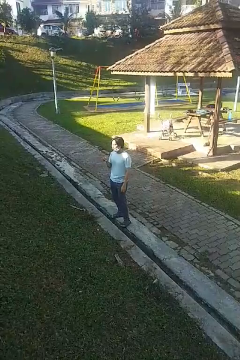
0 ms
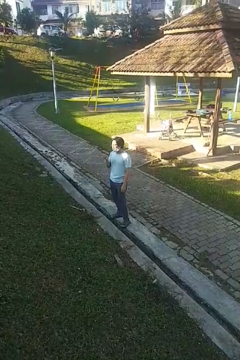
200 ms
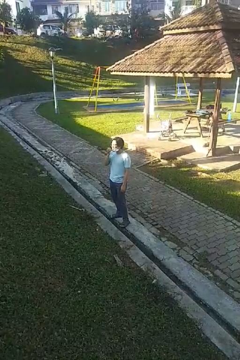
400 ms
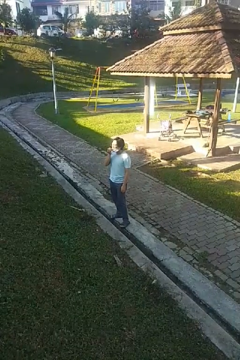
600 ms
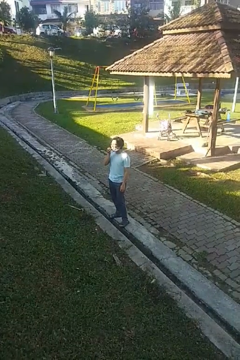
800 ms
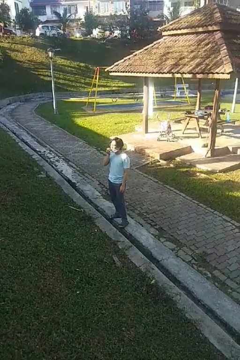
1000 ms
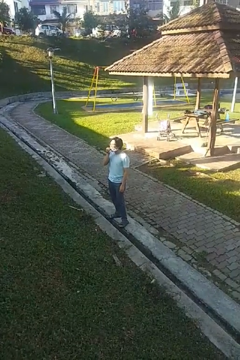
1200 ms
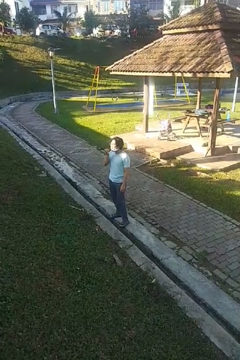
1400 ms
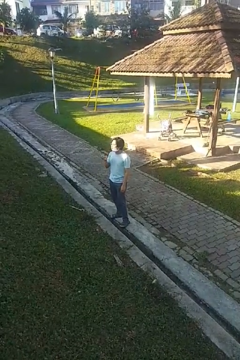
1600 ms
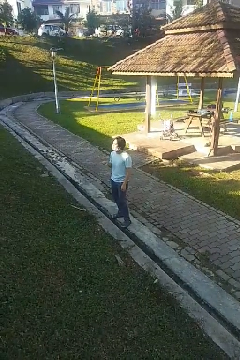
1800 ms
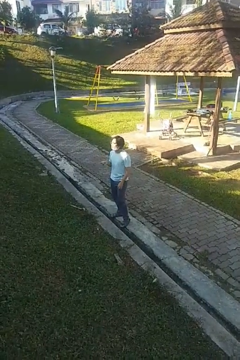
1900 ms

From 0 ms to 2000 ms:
person flosses

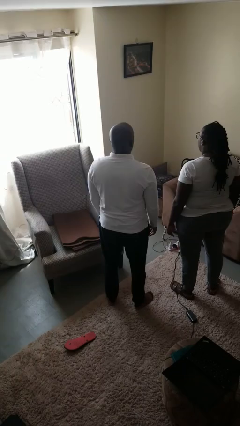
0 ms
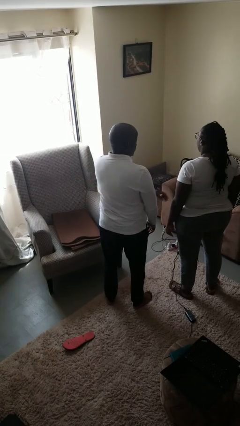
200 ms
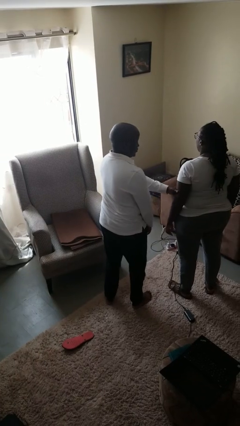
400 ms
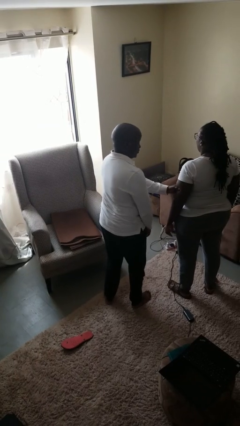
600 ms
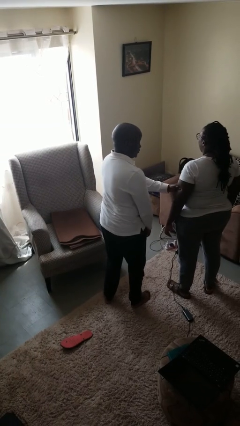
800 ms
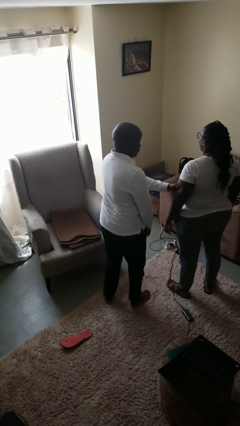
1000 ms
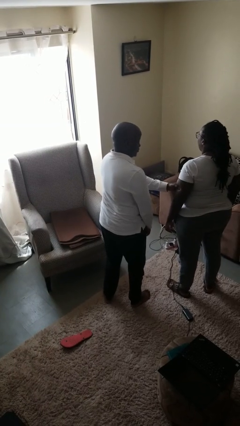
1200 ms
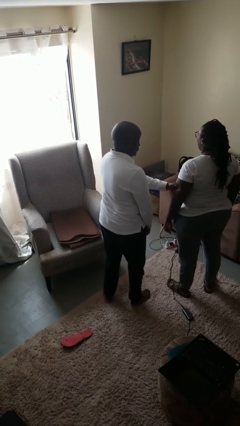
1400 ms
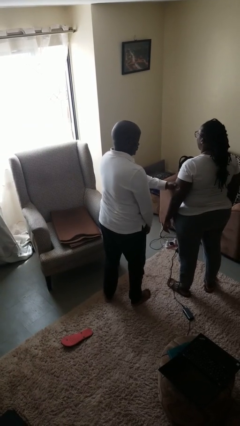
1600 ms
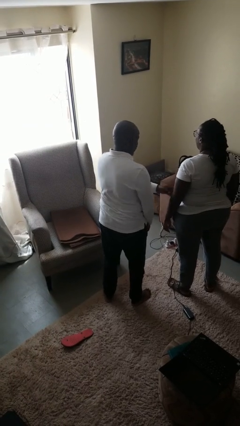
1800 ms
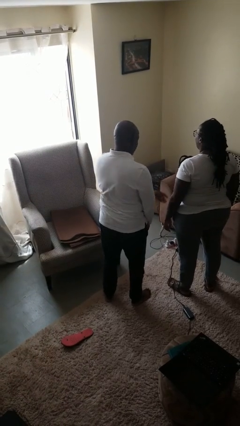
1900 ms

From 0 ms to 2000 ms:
person grabs person by bicep

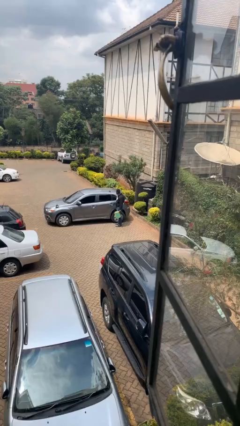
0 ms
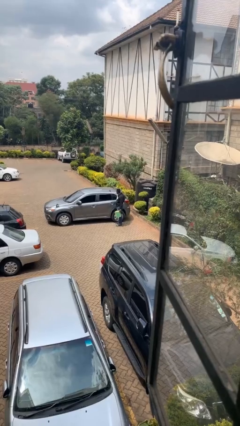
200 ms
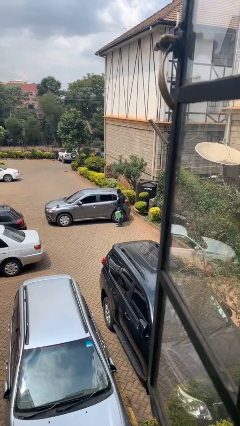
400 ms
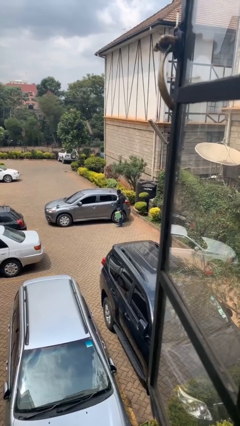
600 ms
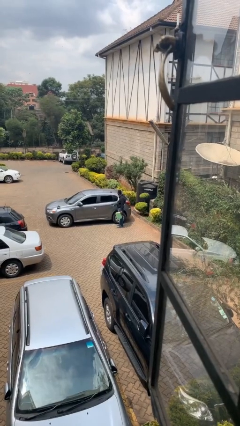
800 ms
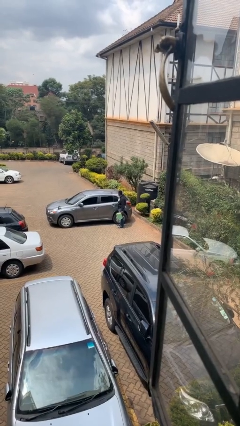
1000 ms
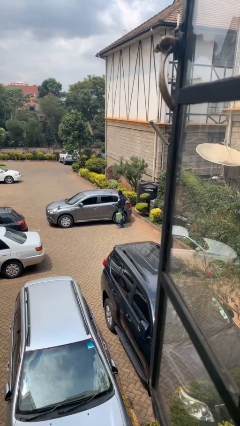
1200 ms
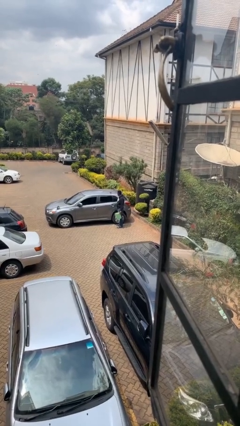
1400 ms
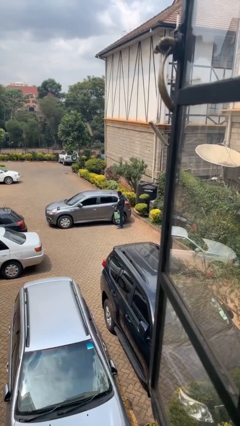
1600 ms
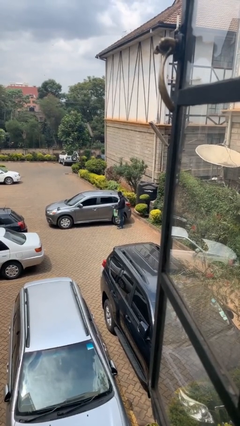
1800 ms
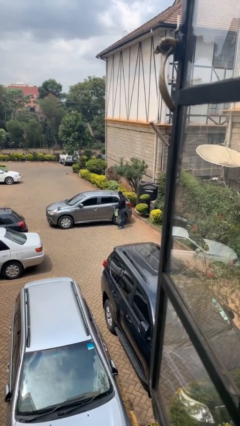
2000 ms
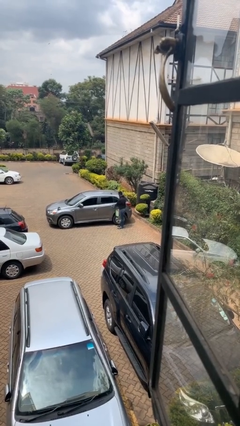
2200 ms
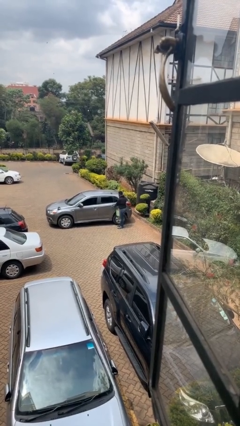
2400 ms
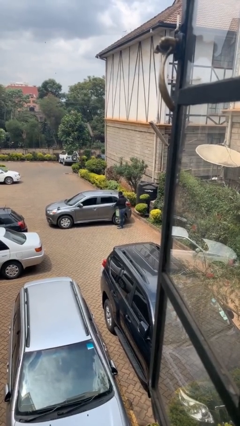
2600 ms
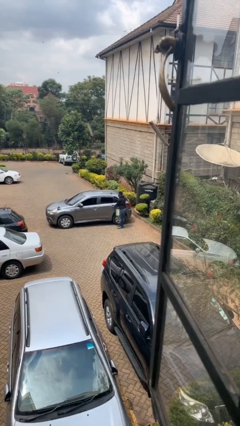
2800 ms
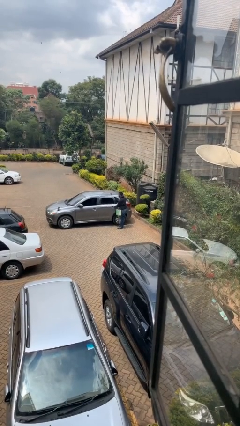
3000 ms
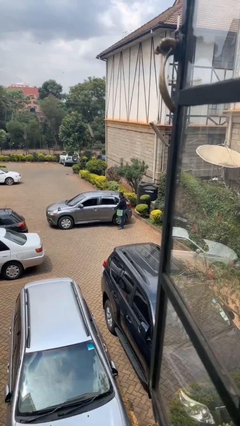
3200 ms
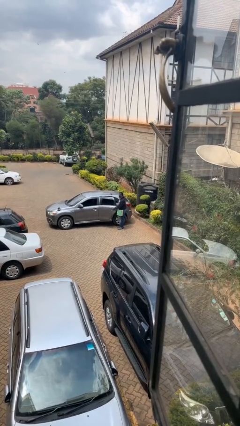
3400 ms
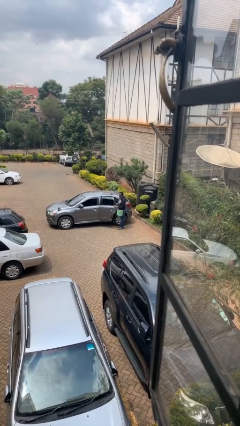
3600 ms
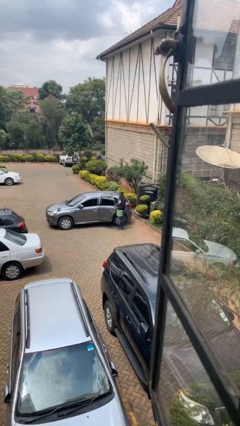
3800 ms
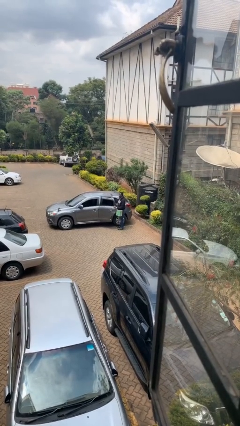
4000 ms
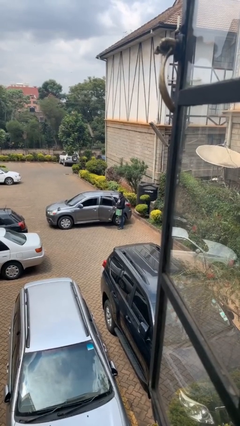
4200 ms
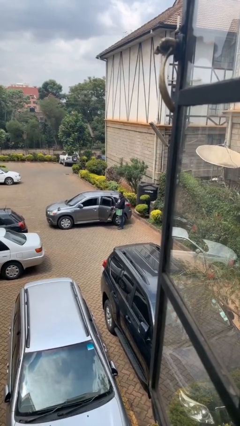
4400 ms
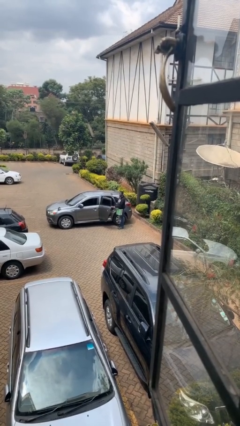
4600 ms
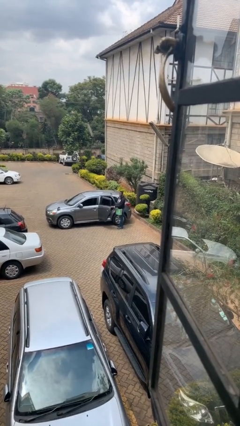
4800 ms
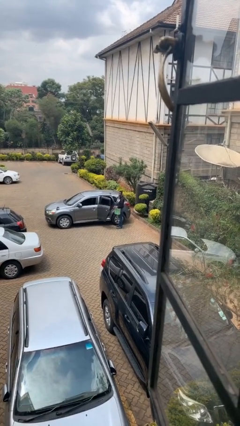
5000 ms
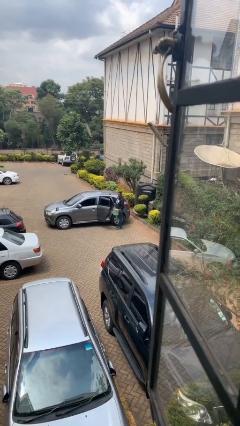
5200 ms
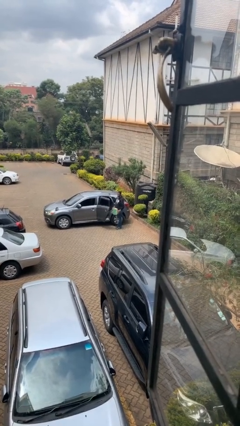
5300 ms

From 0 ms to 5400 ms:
person opens car door

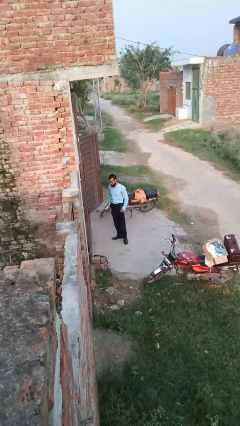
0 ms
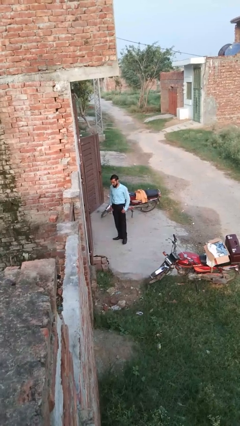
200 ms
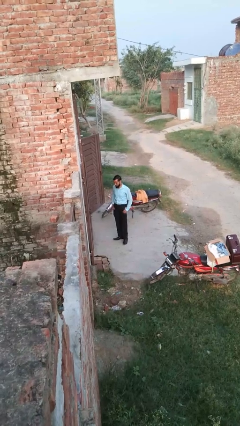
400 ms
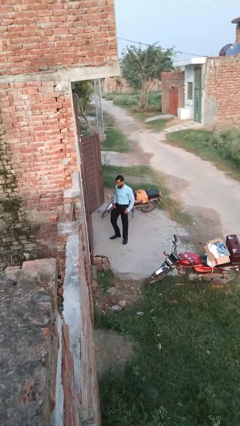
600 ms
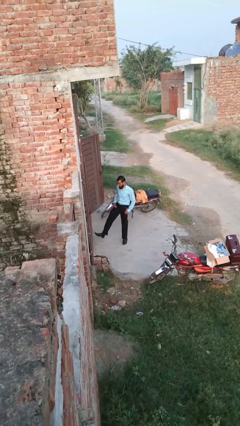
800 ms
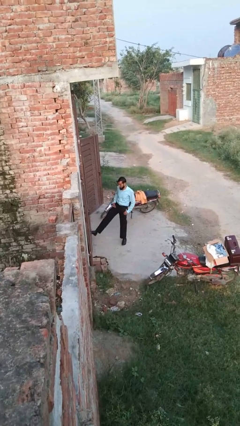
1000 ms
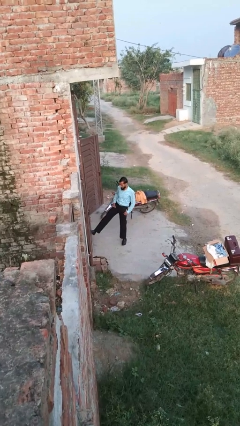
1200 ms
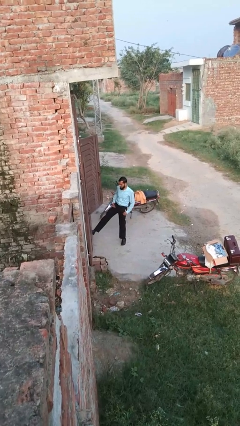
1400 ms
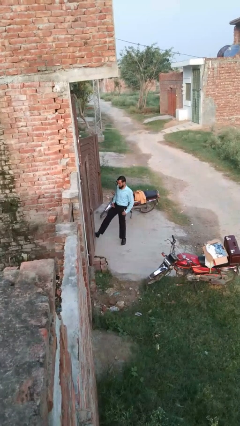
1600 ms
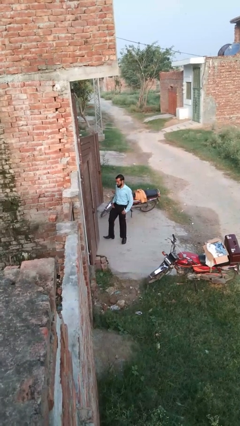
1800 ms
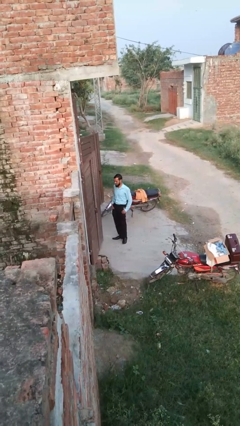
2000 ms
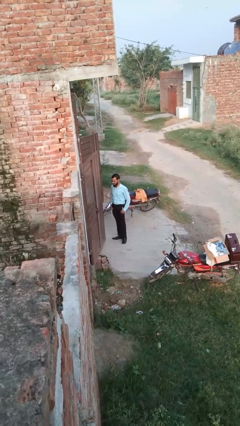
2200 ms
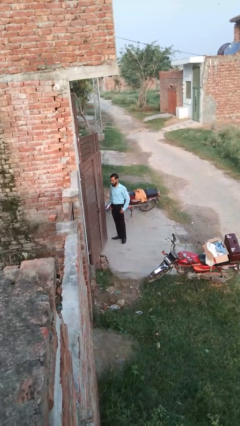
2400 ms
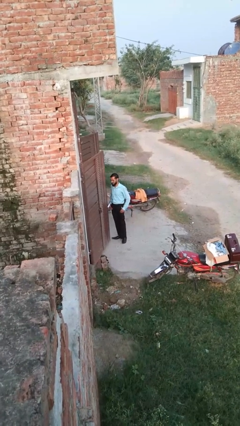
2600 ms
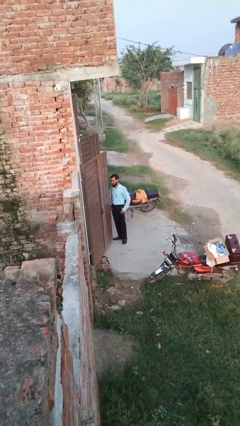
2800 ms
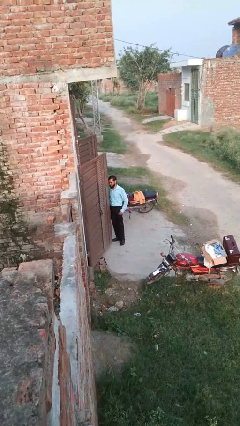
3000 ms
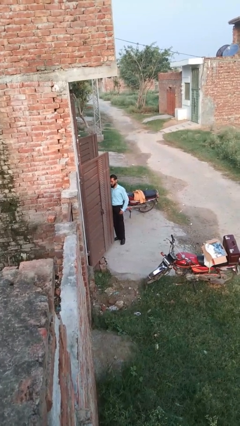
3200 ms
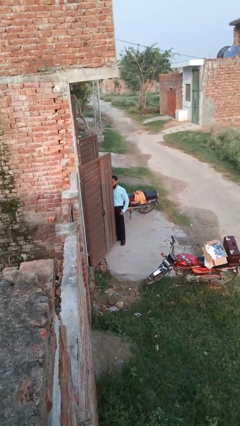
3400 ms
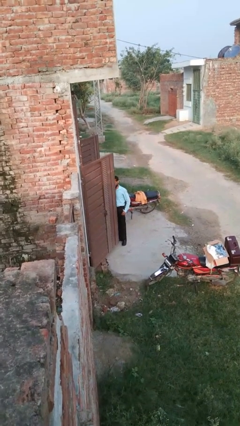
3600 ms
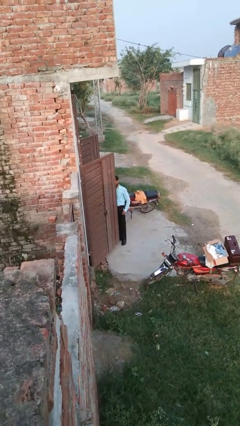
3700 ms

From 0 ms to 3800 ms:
person opens facility door

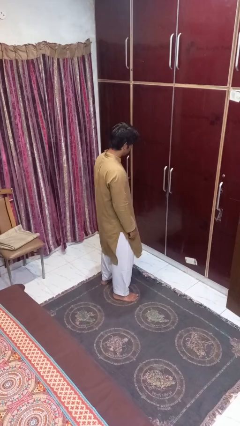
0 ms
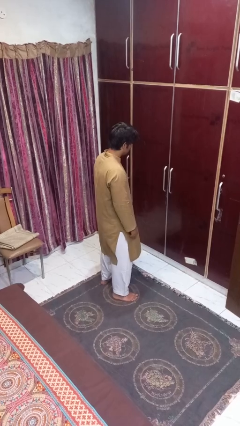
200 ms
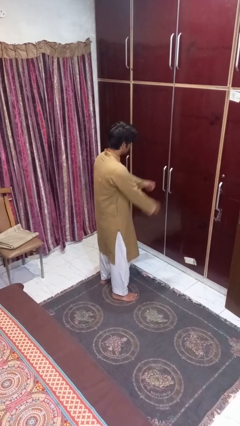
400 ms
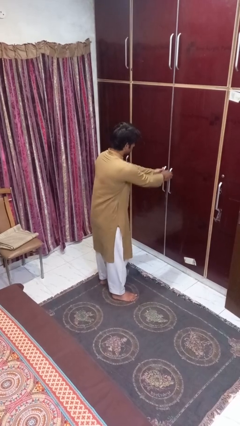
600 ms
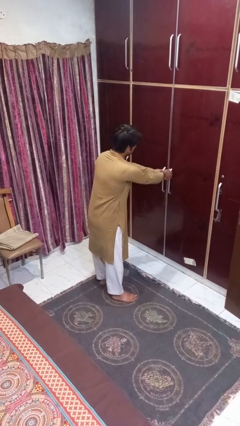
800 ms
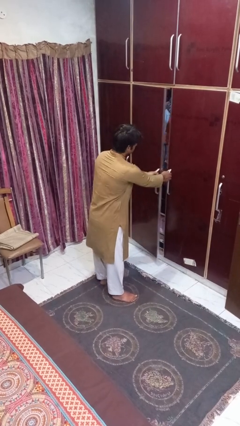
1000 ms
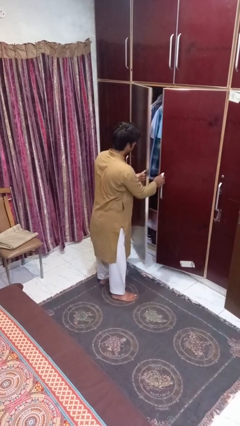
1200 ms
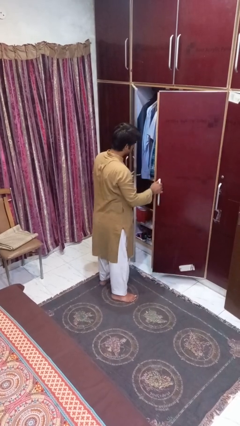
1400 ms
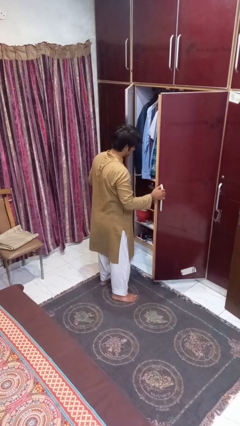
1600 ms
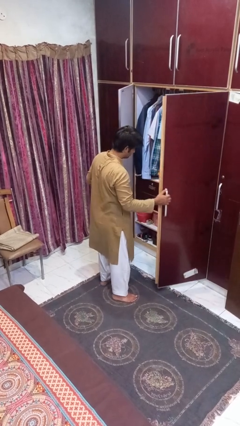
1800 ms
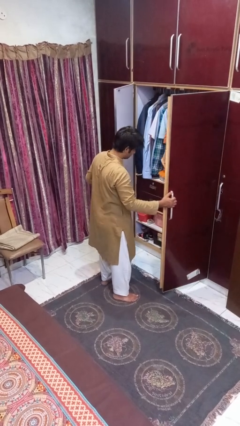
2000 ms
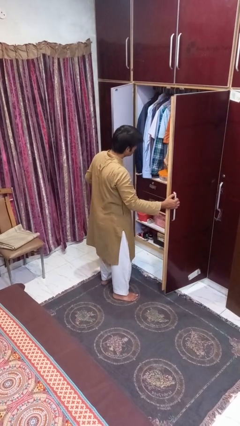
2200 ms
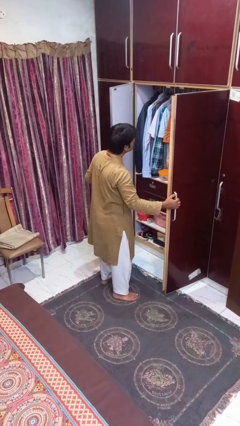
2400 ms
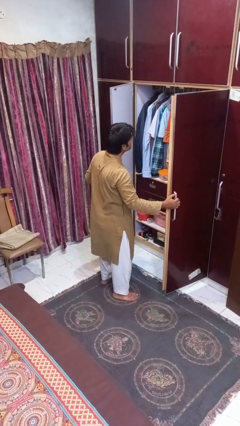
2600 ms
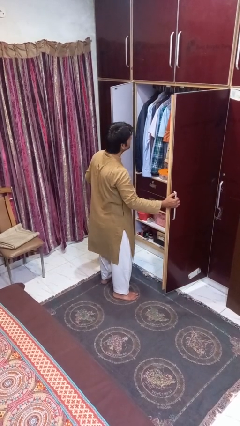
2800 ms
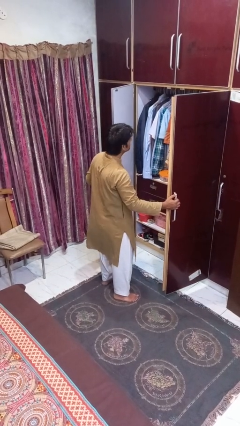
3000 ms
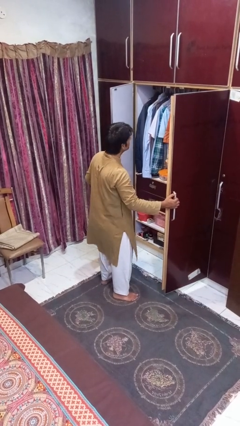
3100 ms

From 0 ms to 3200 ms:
person opens closet door

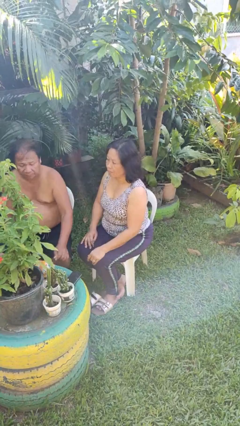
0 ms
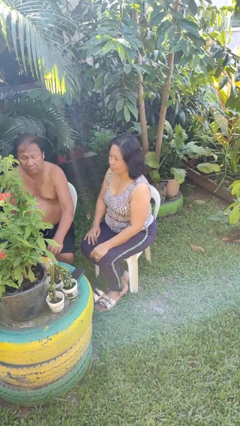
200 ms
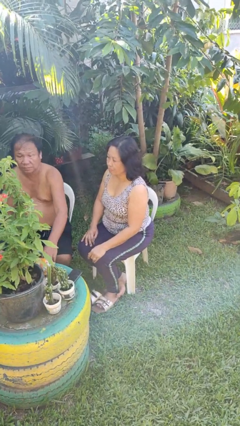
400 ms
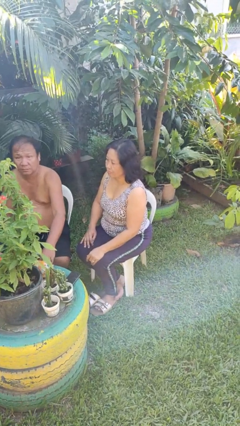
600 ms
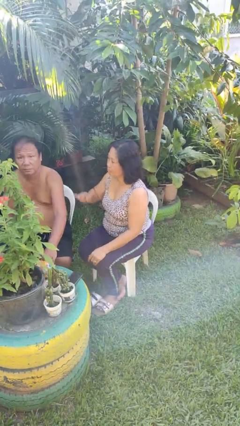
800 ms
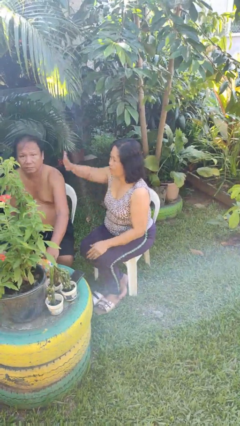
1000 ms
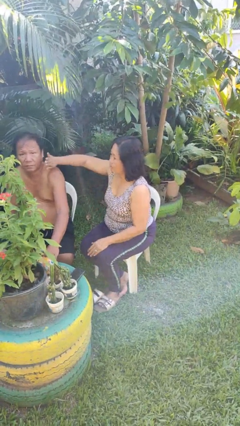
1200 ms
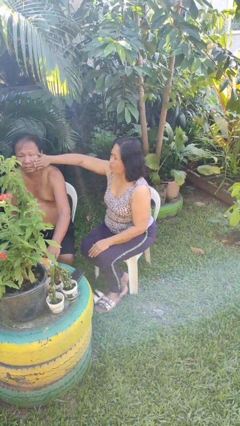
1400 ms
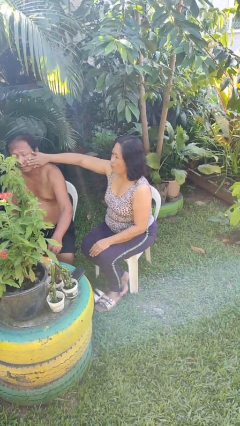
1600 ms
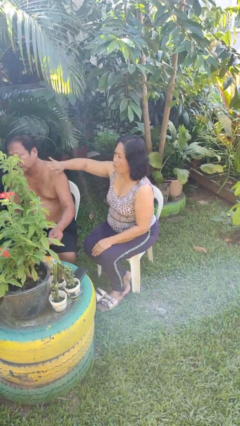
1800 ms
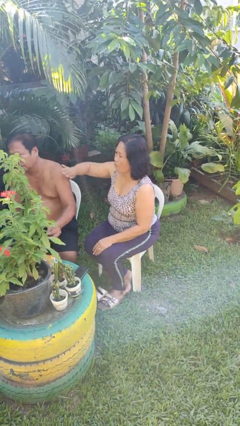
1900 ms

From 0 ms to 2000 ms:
person touches face of person
